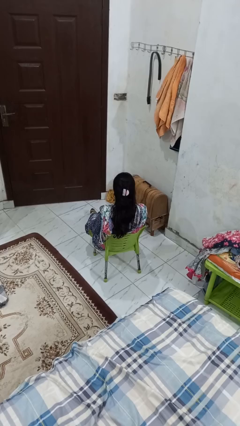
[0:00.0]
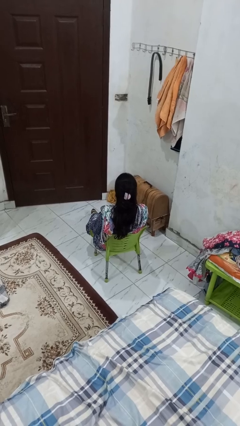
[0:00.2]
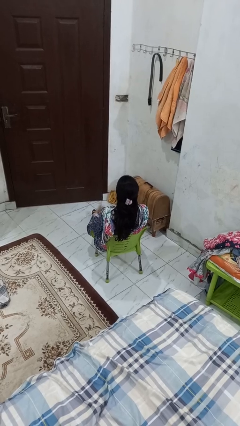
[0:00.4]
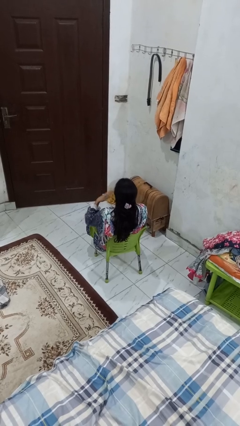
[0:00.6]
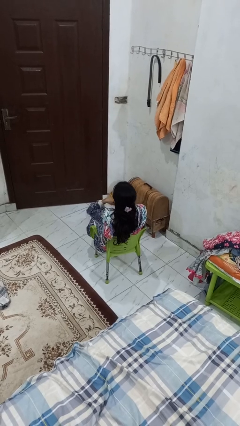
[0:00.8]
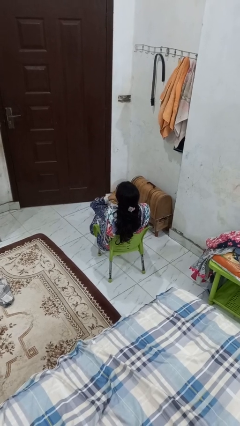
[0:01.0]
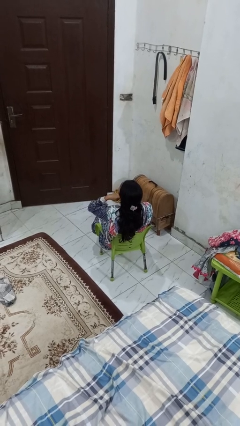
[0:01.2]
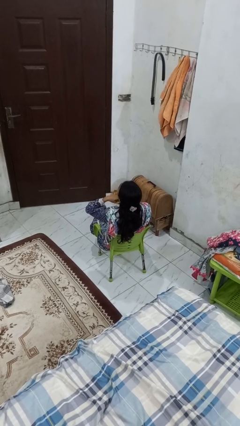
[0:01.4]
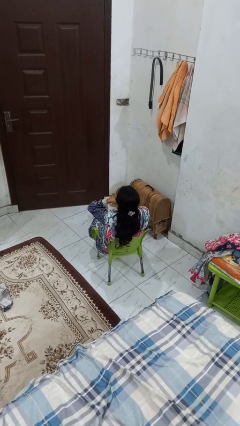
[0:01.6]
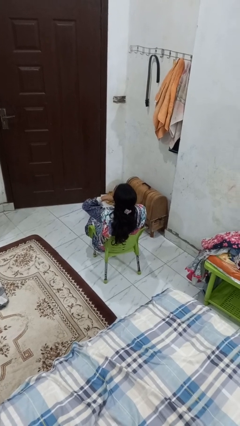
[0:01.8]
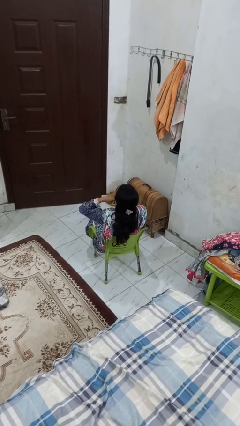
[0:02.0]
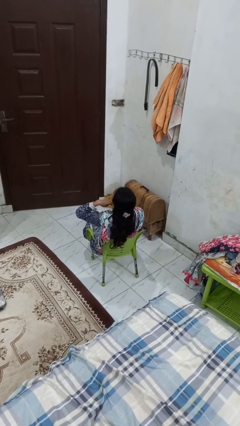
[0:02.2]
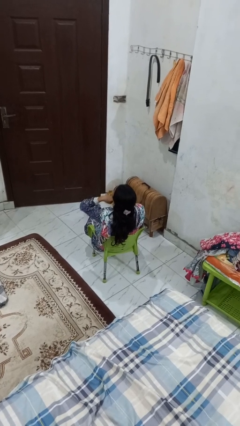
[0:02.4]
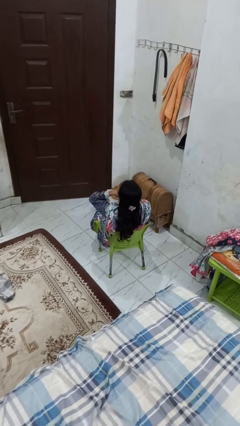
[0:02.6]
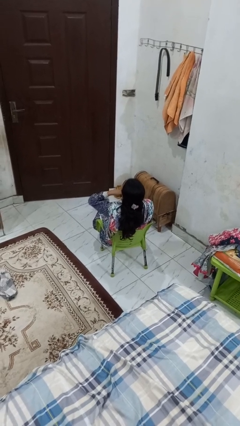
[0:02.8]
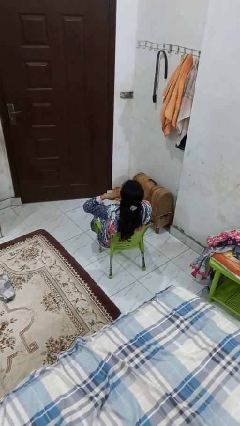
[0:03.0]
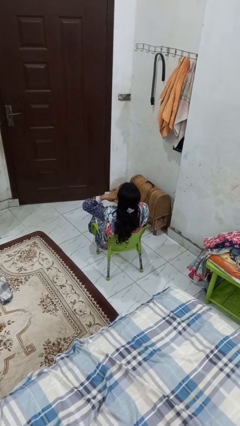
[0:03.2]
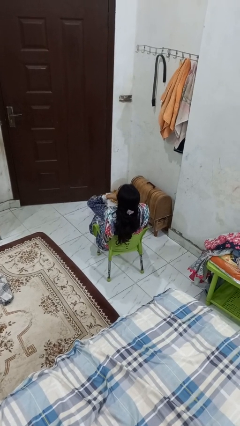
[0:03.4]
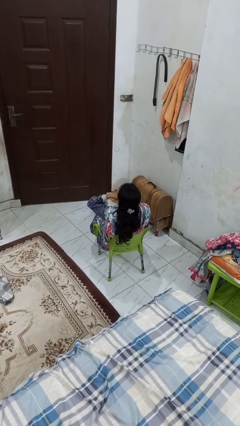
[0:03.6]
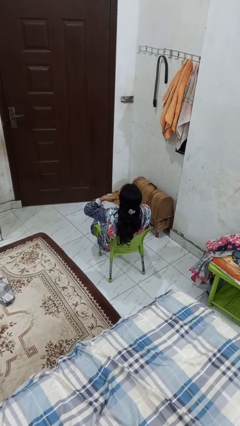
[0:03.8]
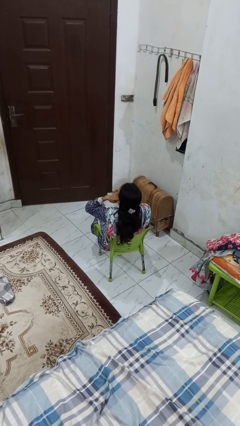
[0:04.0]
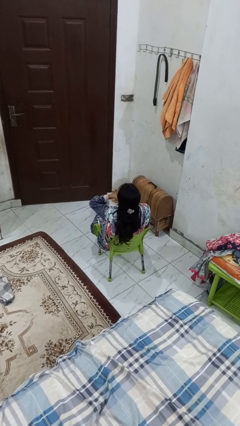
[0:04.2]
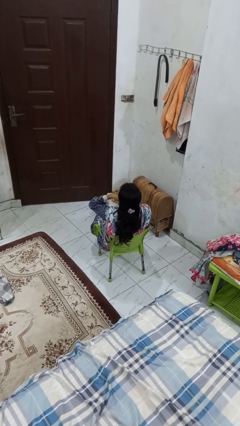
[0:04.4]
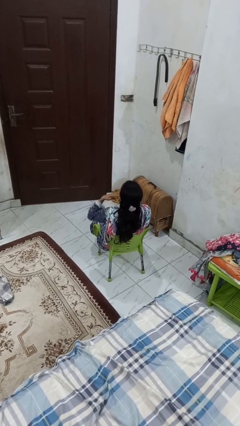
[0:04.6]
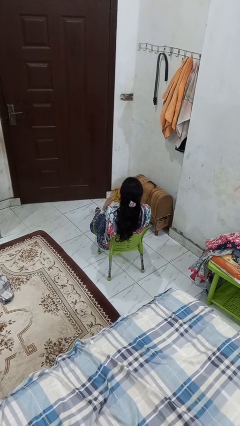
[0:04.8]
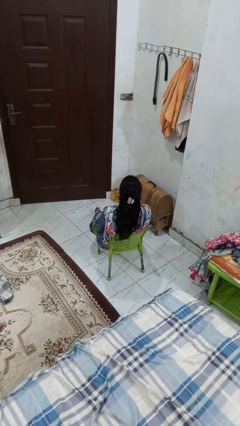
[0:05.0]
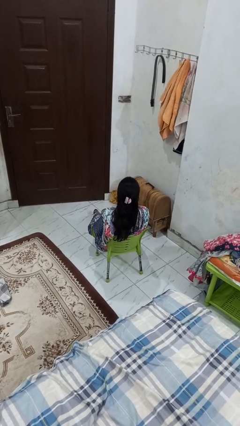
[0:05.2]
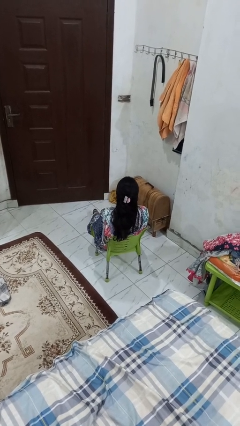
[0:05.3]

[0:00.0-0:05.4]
person gestures cut

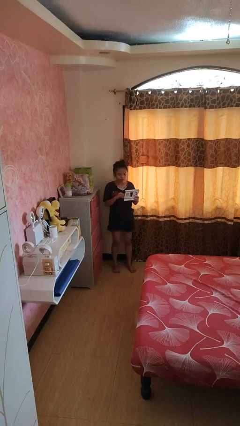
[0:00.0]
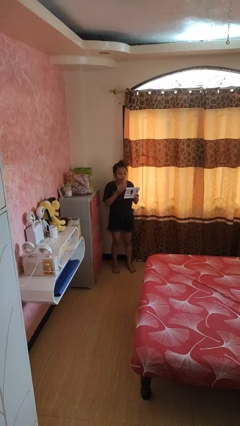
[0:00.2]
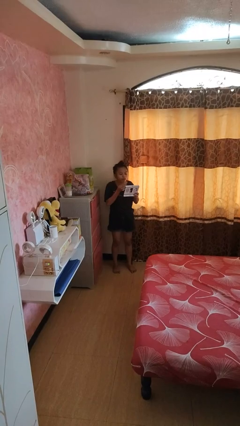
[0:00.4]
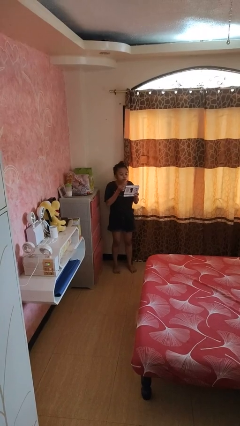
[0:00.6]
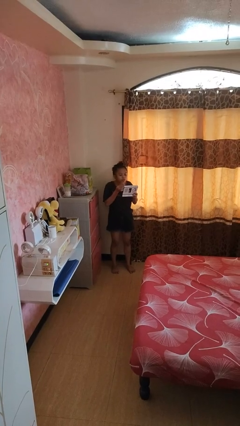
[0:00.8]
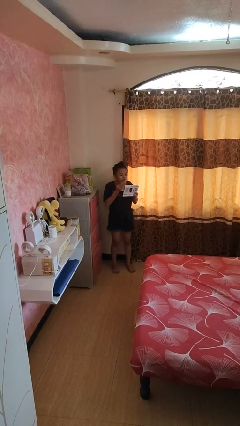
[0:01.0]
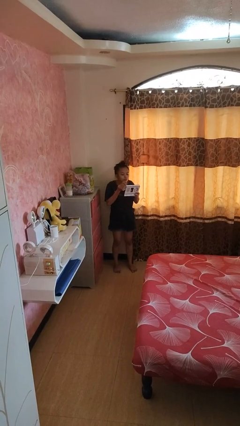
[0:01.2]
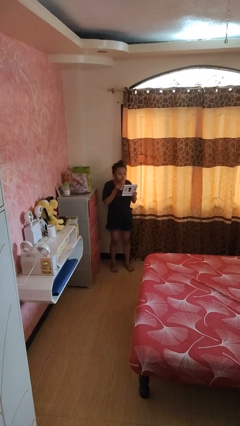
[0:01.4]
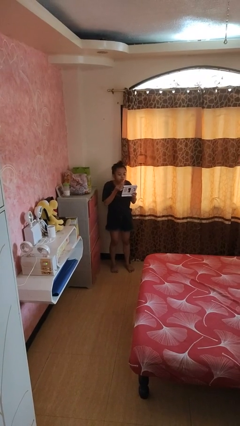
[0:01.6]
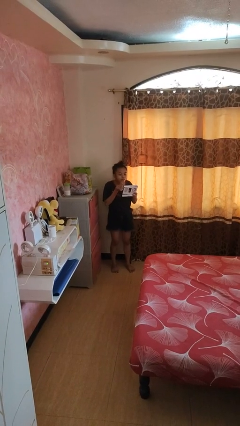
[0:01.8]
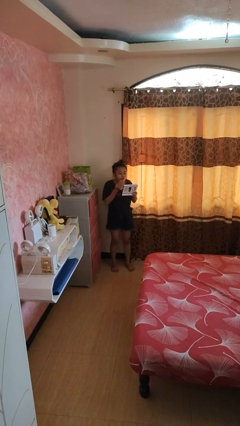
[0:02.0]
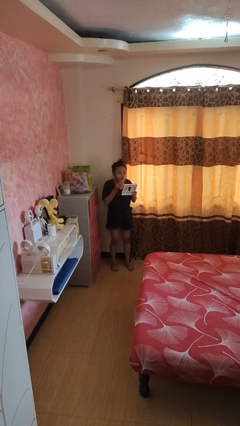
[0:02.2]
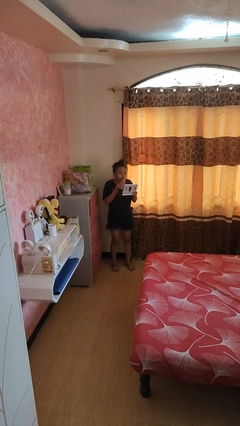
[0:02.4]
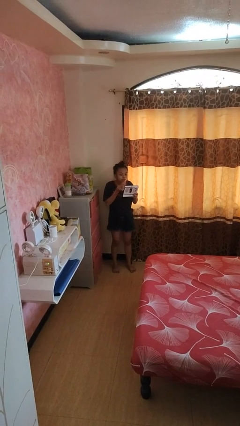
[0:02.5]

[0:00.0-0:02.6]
person applies foundation makeup

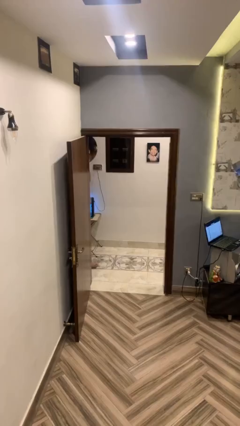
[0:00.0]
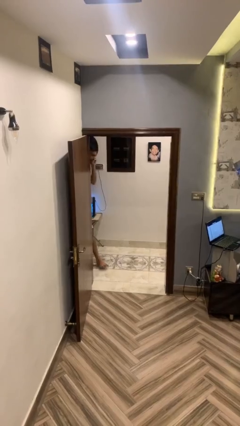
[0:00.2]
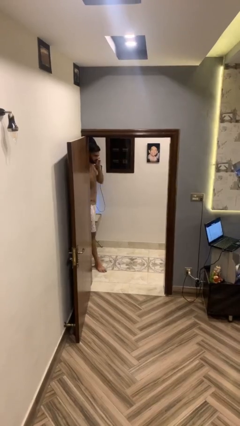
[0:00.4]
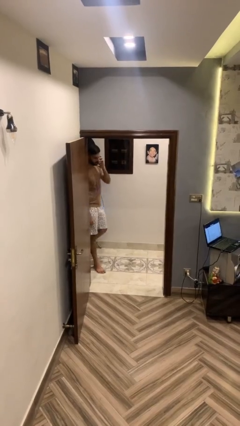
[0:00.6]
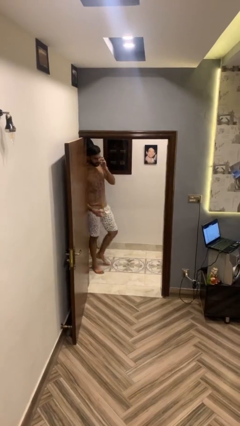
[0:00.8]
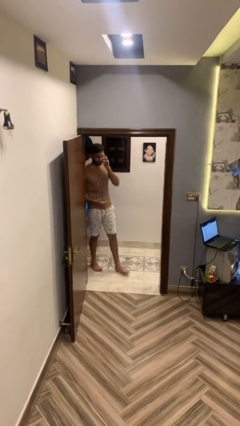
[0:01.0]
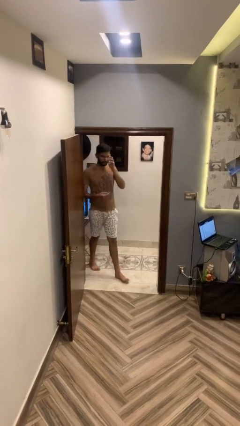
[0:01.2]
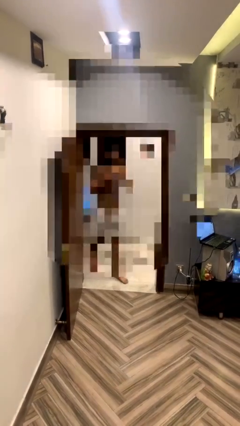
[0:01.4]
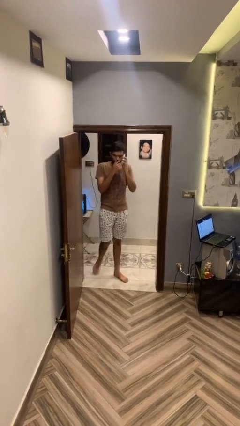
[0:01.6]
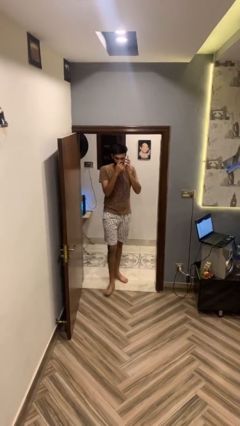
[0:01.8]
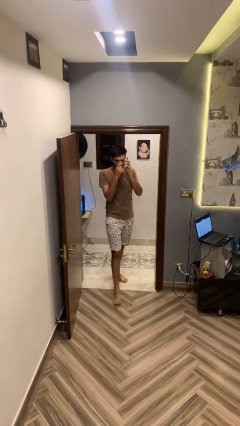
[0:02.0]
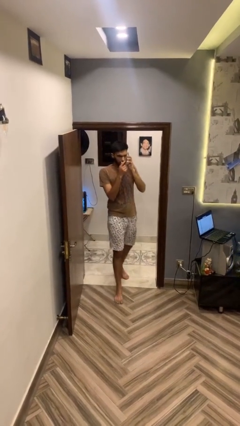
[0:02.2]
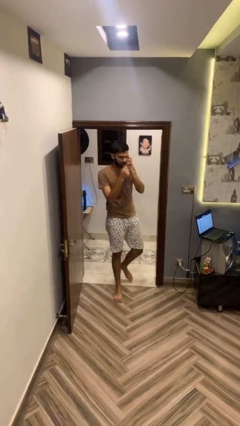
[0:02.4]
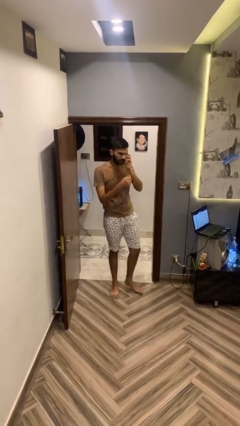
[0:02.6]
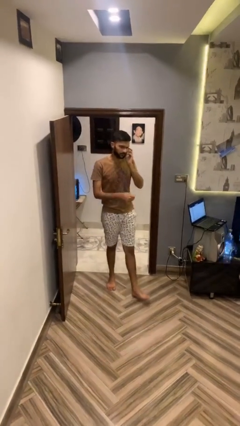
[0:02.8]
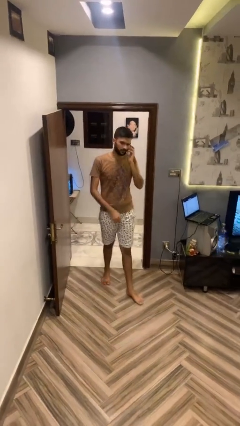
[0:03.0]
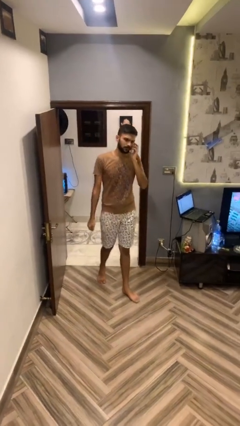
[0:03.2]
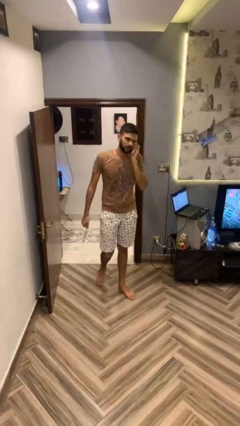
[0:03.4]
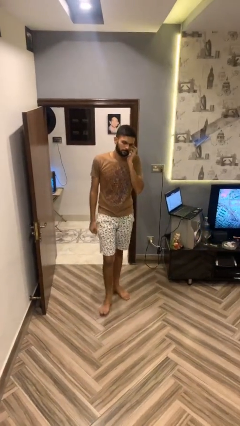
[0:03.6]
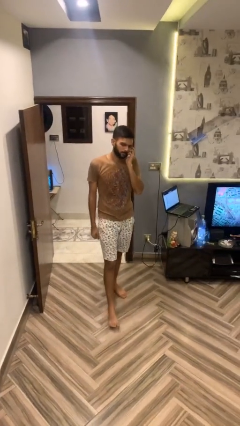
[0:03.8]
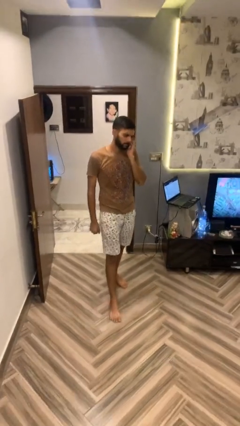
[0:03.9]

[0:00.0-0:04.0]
person enters scene through structure

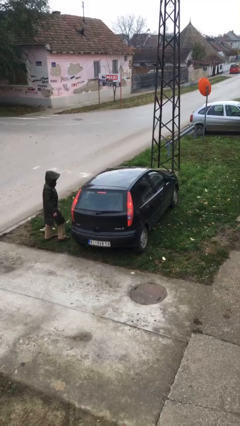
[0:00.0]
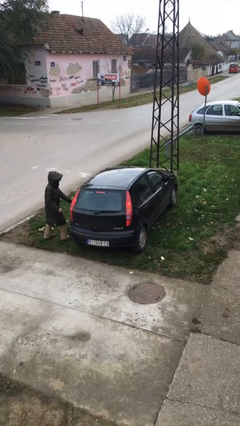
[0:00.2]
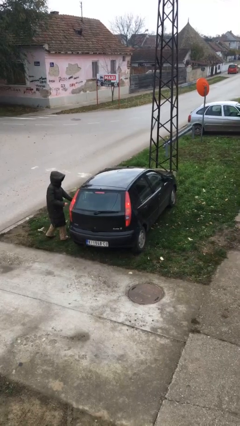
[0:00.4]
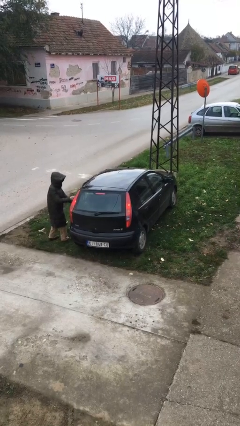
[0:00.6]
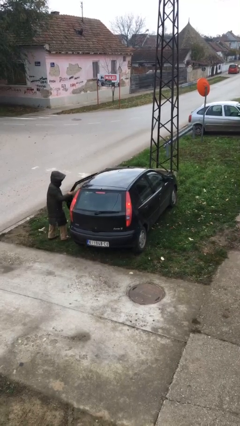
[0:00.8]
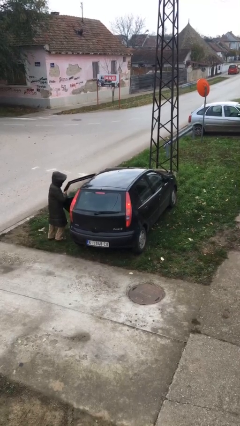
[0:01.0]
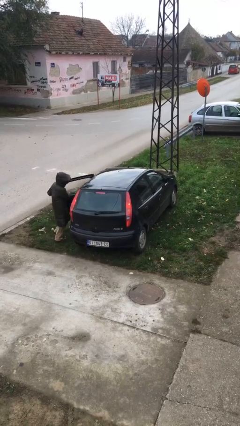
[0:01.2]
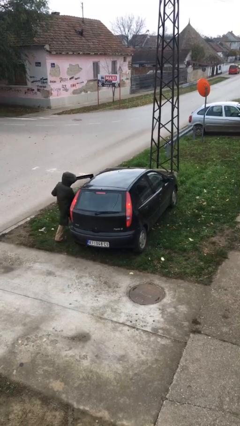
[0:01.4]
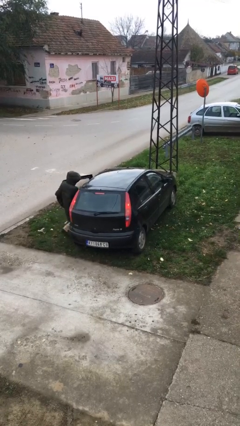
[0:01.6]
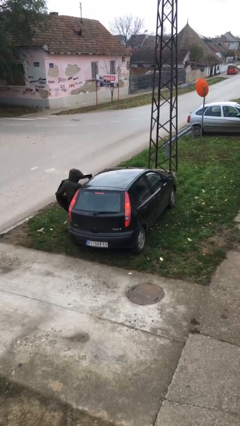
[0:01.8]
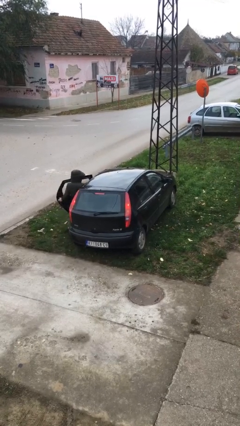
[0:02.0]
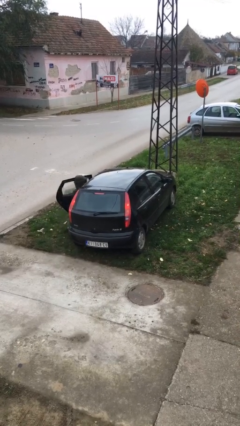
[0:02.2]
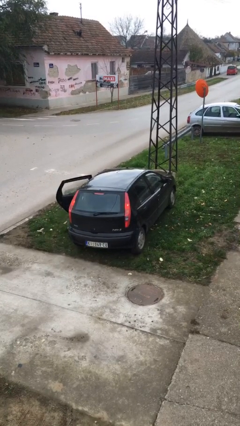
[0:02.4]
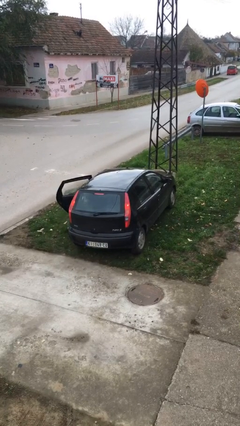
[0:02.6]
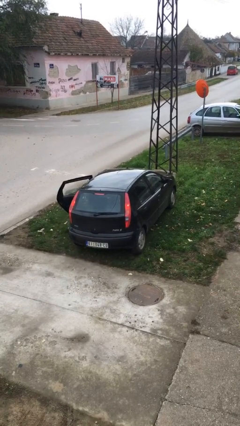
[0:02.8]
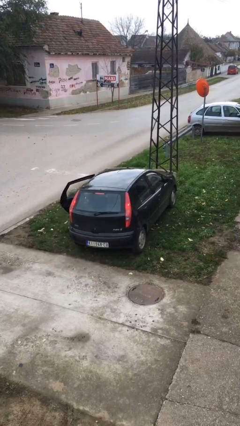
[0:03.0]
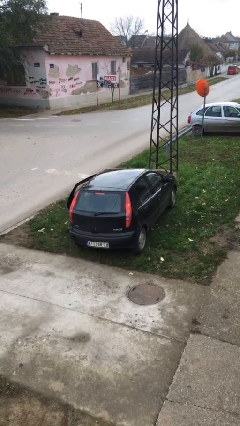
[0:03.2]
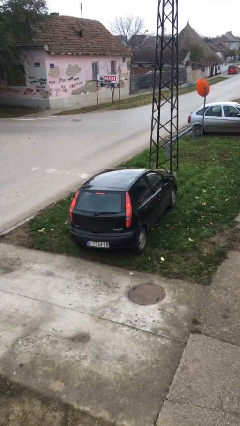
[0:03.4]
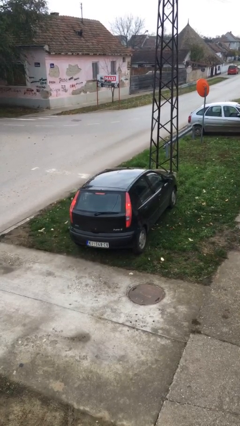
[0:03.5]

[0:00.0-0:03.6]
car picks up person

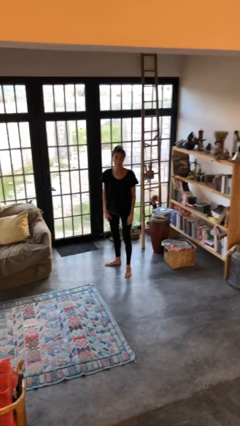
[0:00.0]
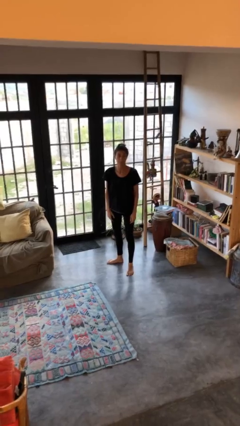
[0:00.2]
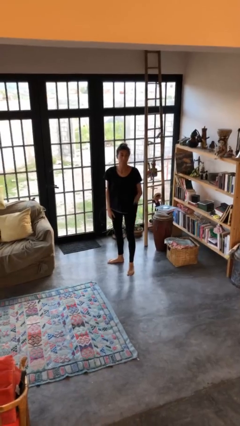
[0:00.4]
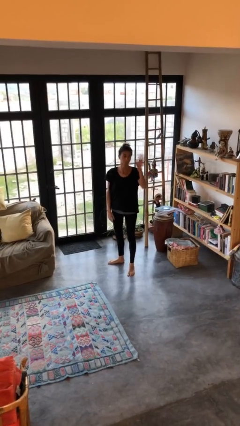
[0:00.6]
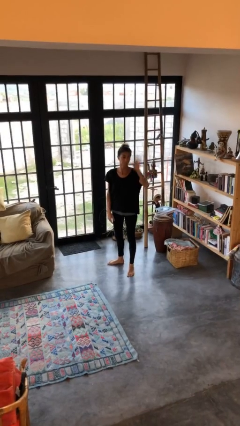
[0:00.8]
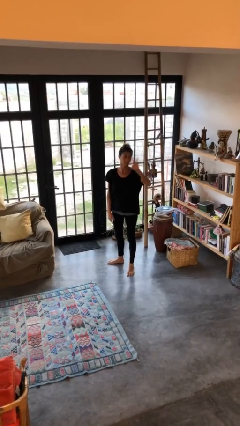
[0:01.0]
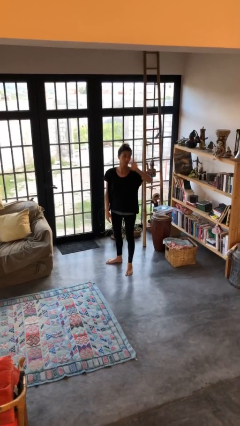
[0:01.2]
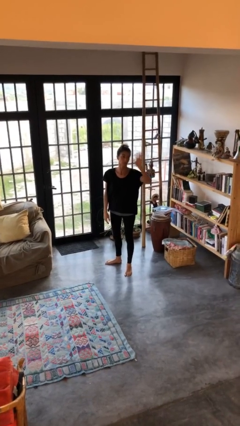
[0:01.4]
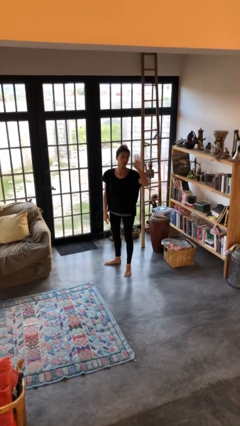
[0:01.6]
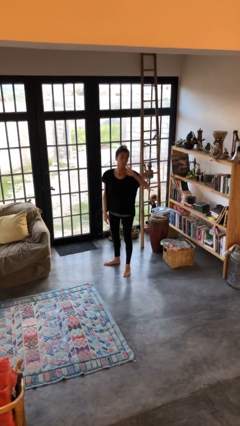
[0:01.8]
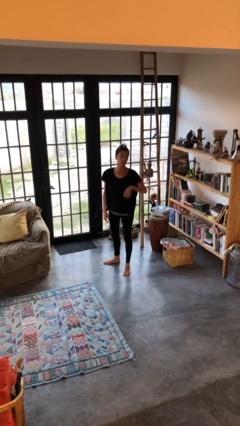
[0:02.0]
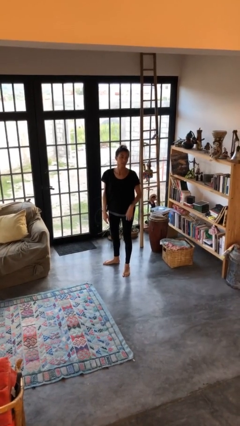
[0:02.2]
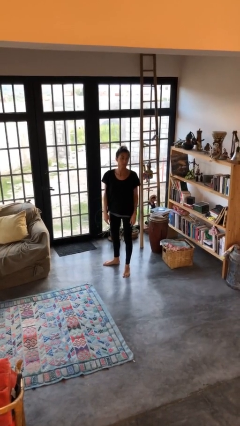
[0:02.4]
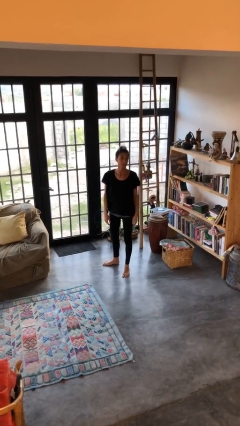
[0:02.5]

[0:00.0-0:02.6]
person waves at person
